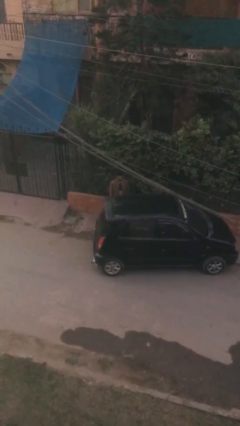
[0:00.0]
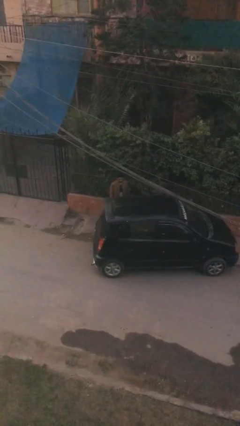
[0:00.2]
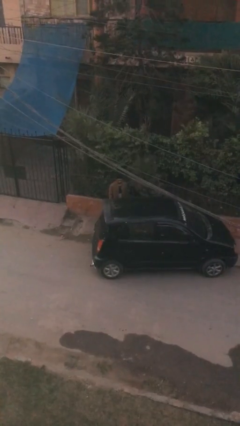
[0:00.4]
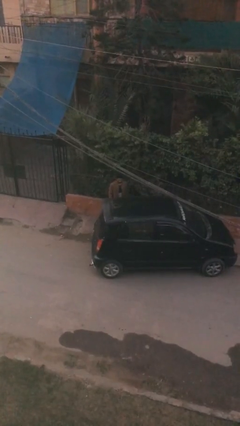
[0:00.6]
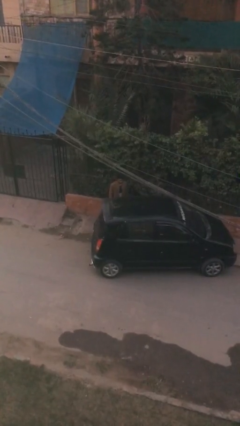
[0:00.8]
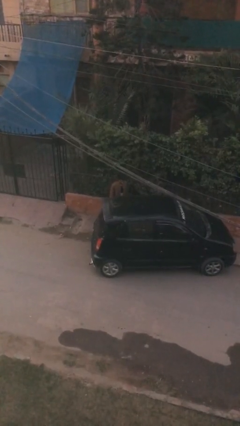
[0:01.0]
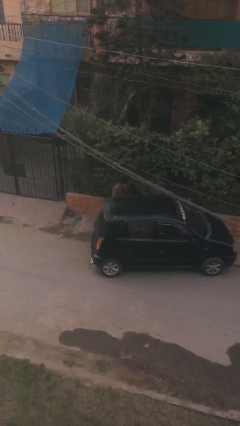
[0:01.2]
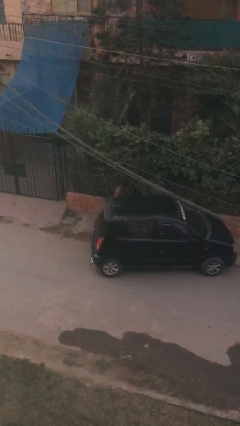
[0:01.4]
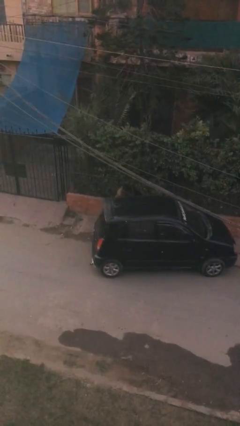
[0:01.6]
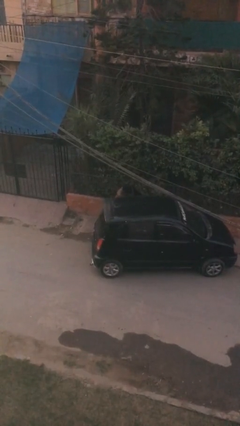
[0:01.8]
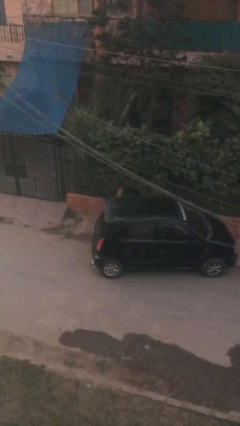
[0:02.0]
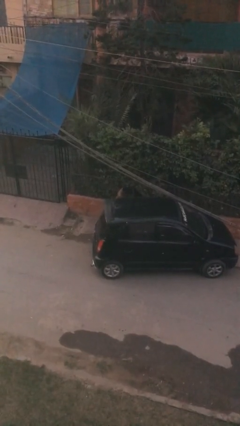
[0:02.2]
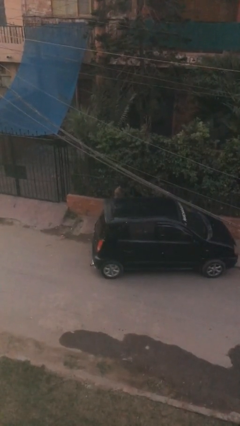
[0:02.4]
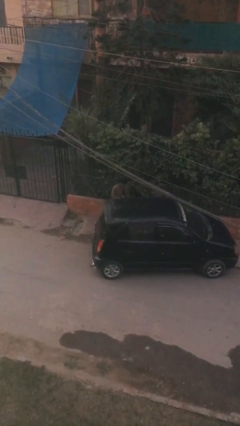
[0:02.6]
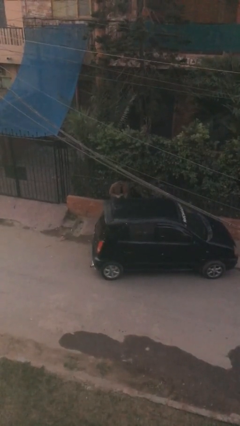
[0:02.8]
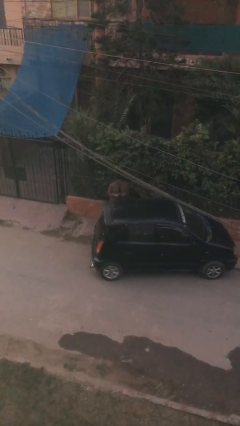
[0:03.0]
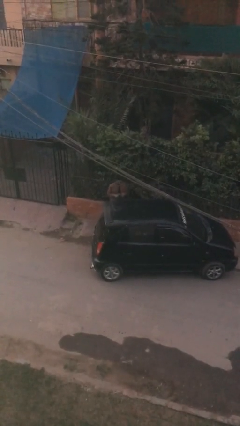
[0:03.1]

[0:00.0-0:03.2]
person unloads car

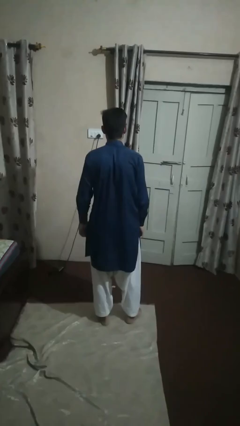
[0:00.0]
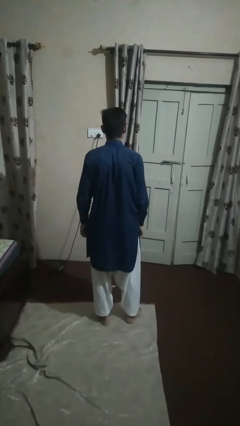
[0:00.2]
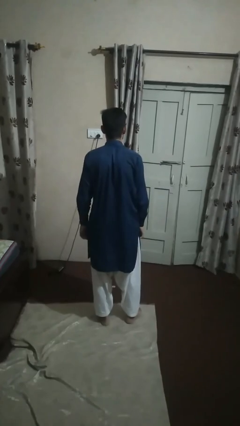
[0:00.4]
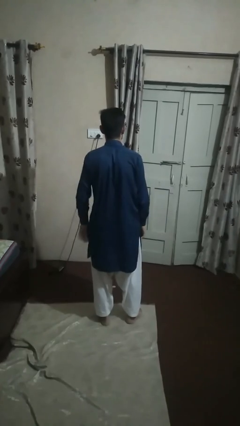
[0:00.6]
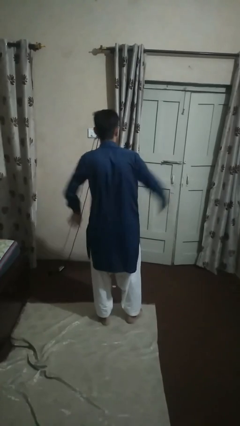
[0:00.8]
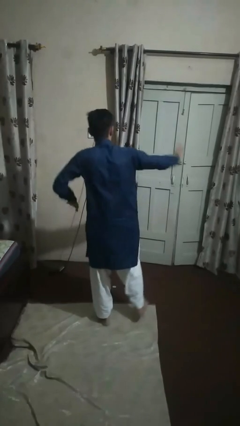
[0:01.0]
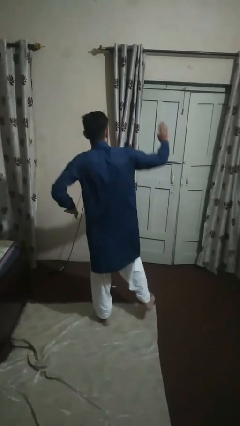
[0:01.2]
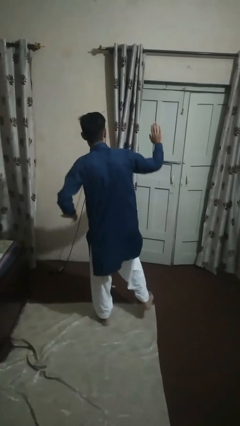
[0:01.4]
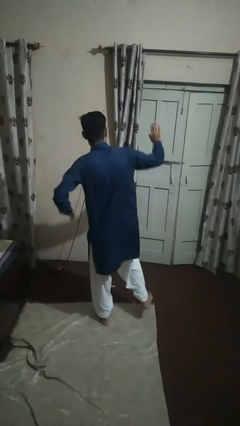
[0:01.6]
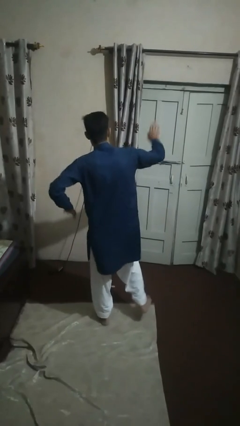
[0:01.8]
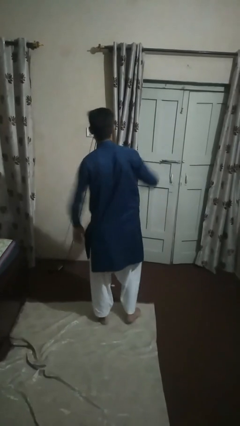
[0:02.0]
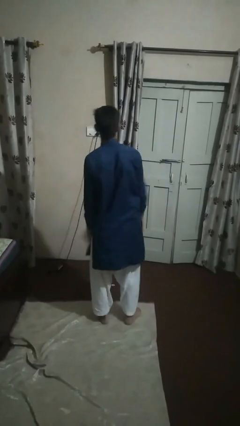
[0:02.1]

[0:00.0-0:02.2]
person dances in place

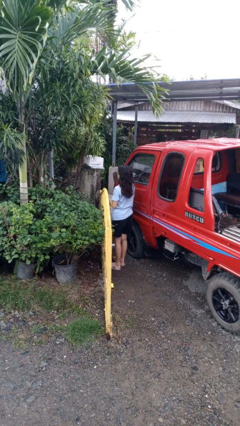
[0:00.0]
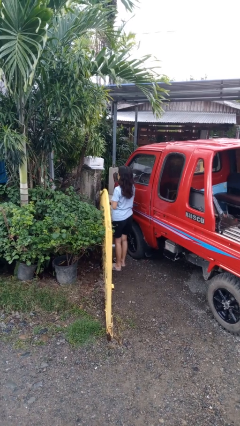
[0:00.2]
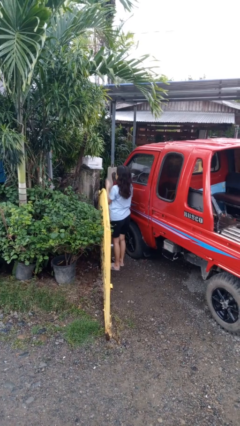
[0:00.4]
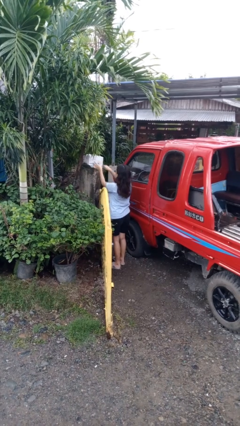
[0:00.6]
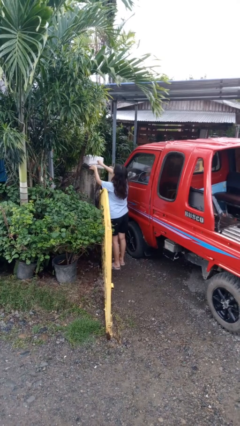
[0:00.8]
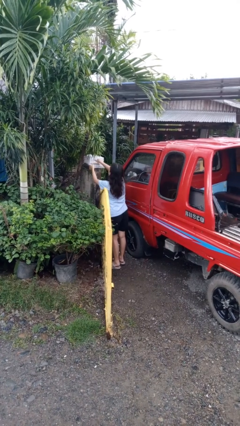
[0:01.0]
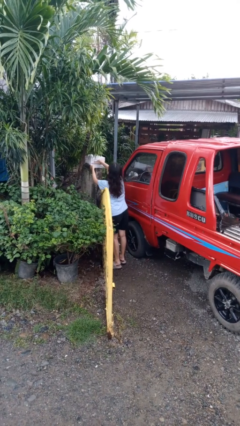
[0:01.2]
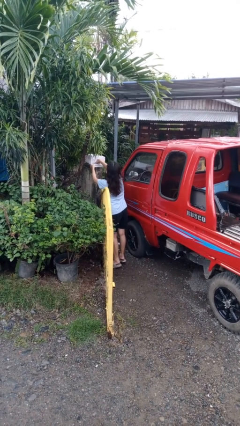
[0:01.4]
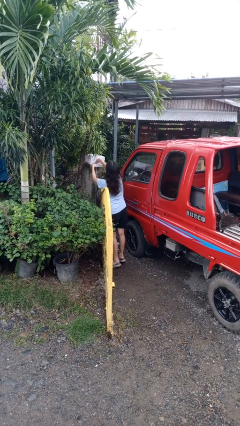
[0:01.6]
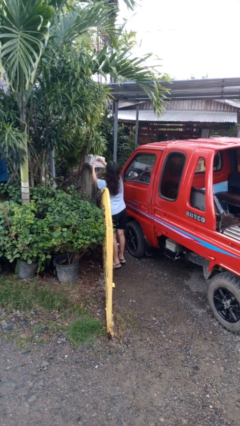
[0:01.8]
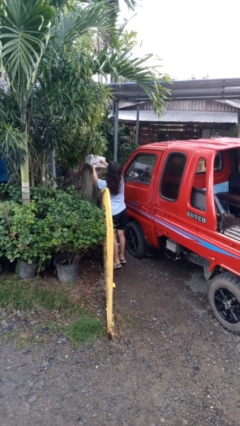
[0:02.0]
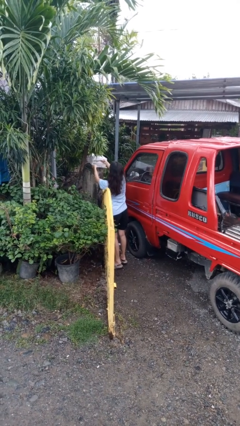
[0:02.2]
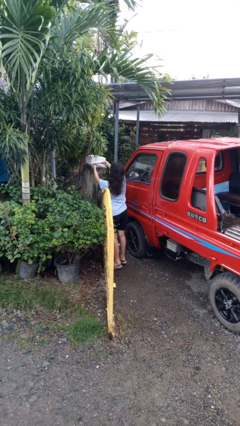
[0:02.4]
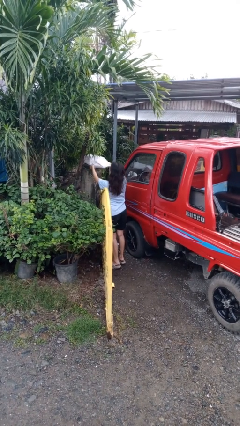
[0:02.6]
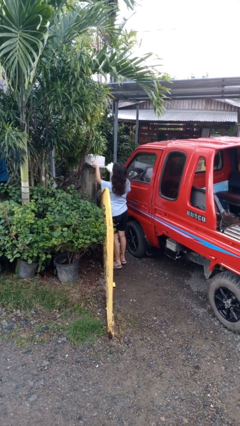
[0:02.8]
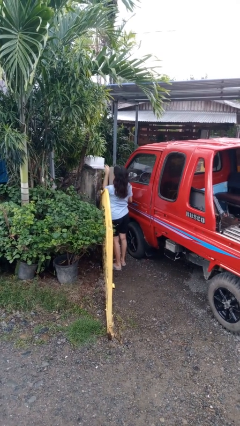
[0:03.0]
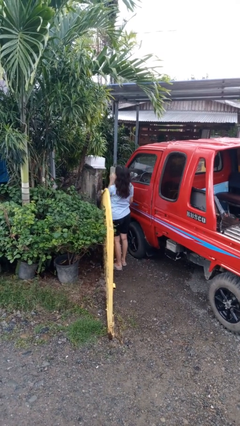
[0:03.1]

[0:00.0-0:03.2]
person takes letters from mailbox

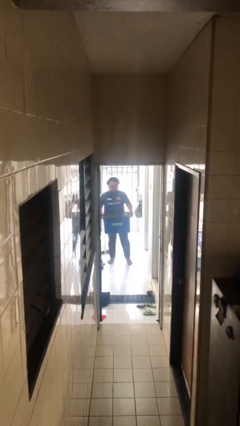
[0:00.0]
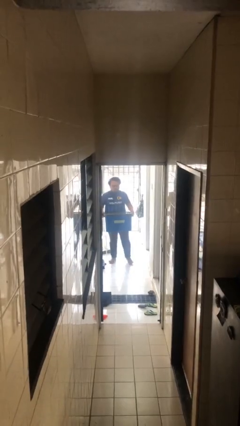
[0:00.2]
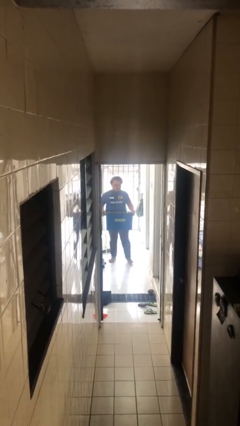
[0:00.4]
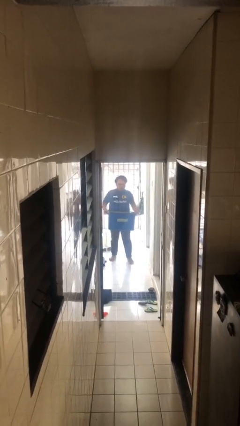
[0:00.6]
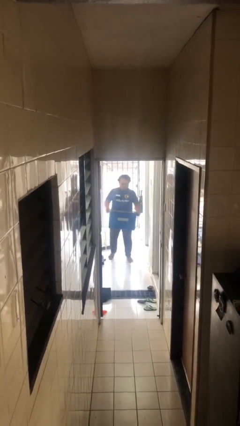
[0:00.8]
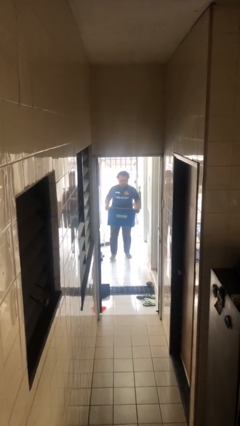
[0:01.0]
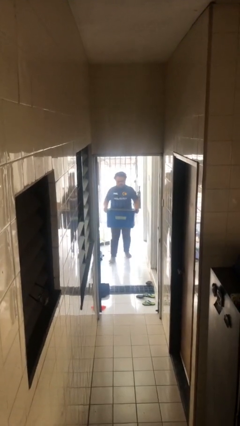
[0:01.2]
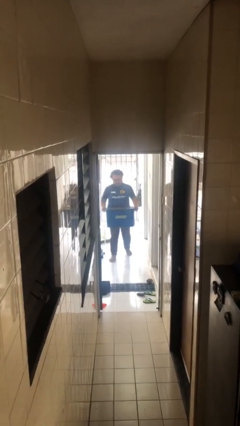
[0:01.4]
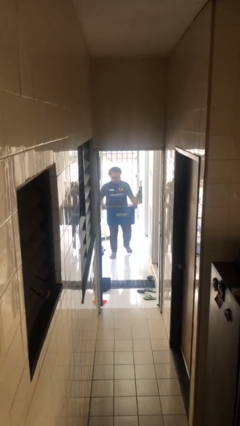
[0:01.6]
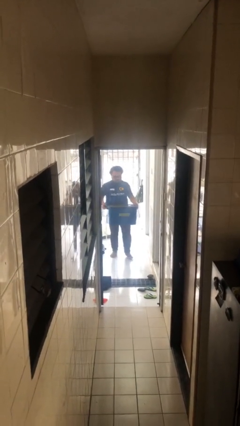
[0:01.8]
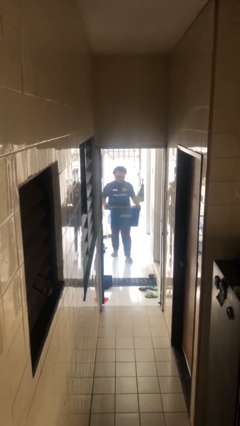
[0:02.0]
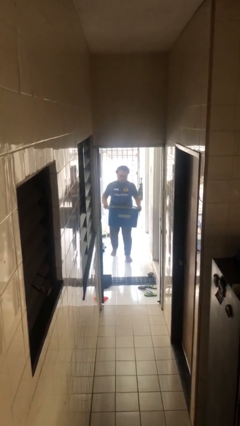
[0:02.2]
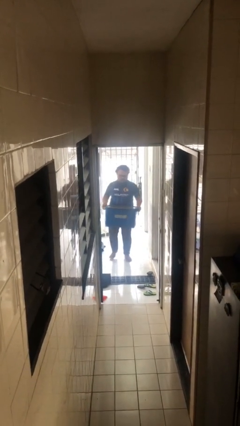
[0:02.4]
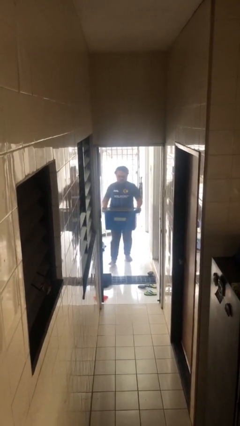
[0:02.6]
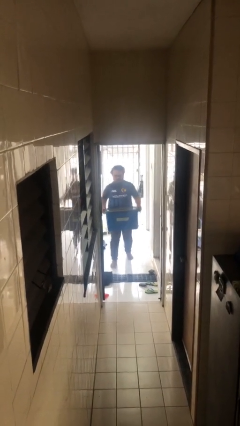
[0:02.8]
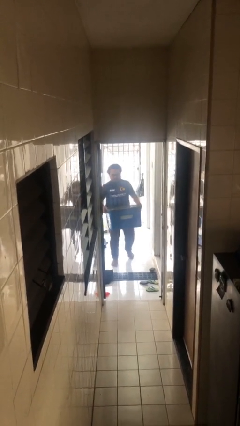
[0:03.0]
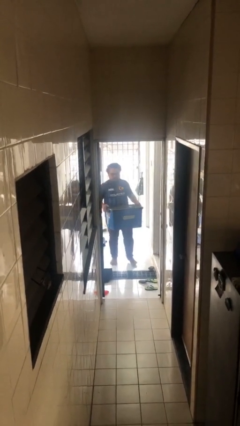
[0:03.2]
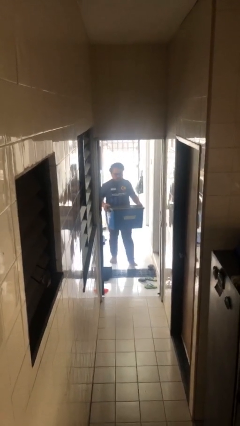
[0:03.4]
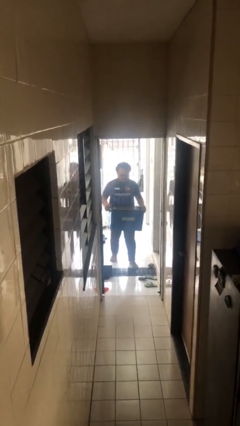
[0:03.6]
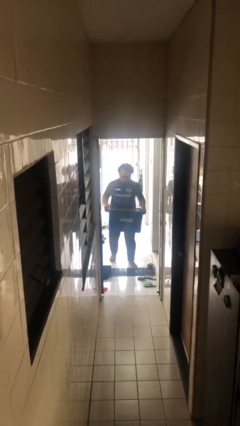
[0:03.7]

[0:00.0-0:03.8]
person carries heavy object

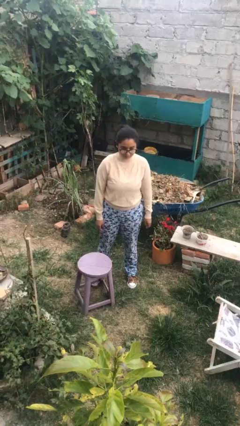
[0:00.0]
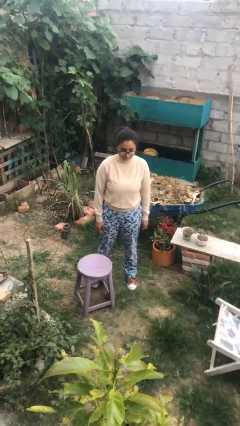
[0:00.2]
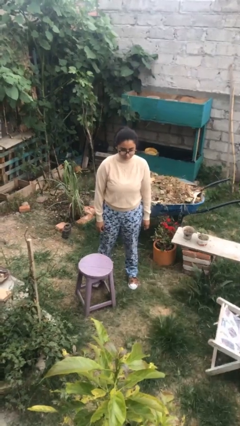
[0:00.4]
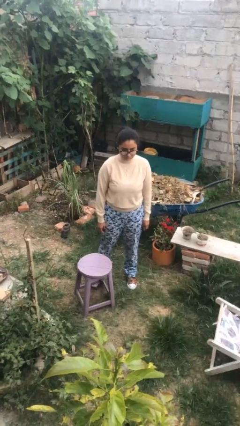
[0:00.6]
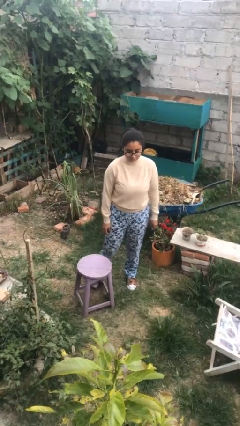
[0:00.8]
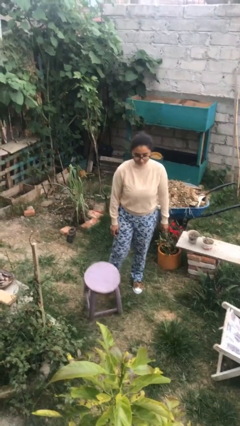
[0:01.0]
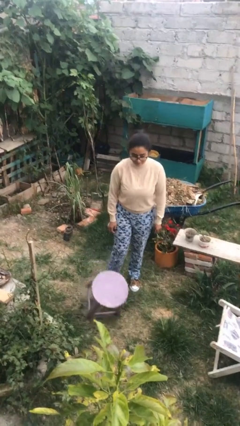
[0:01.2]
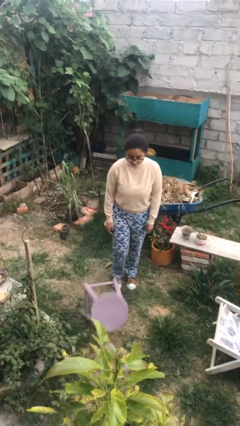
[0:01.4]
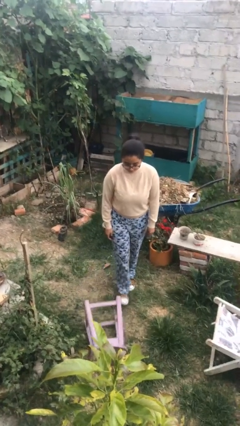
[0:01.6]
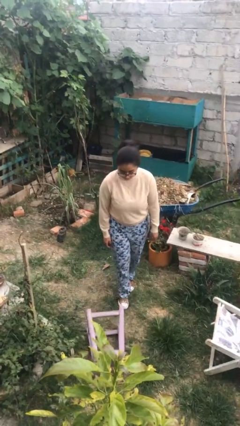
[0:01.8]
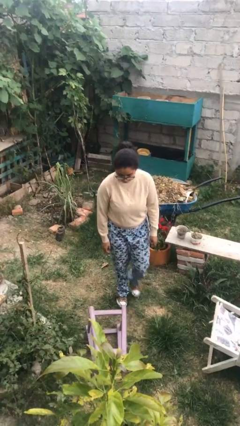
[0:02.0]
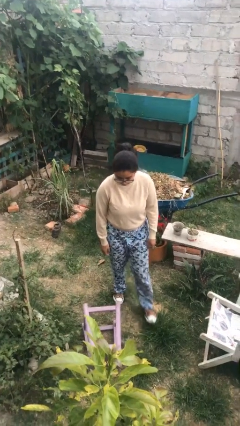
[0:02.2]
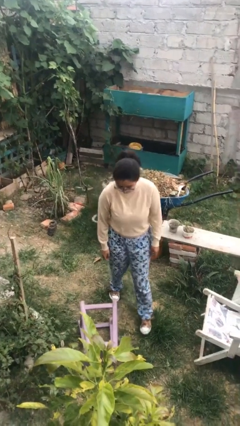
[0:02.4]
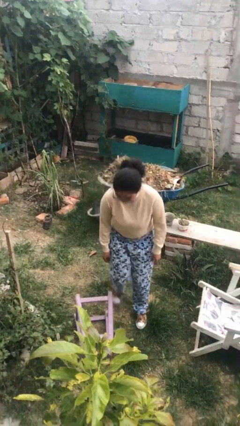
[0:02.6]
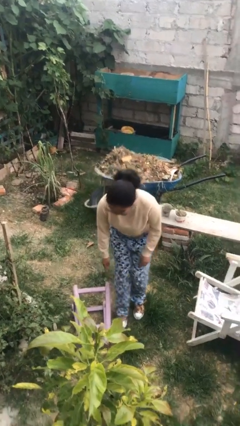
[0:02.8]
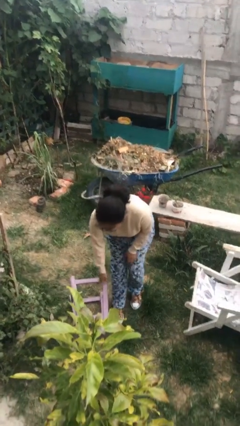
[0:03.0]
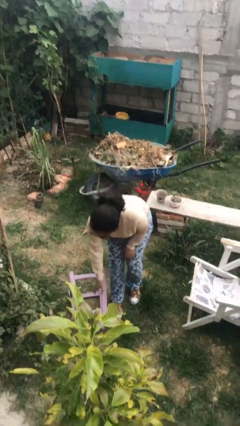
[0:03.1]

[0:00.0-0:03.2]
person knocks over furniture

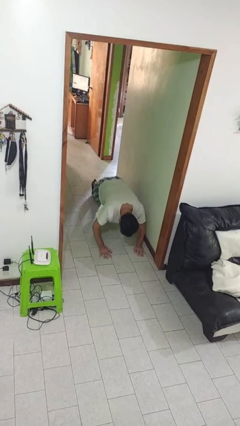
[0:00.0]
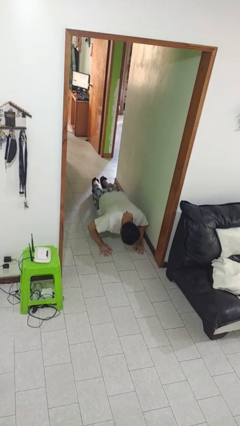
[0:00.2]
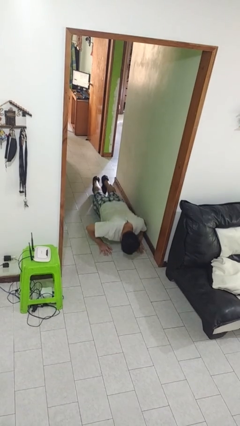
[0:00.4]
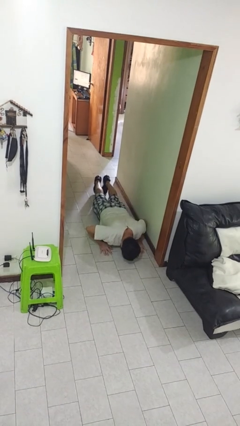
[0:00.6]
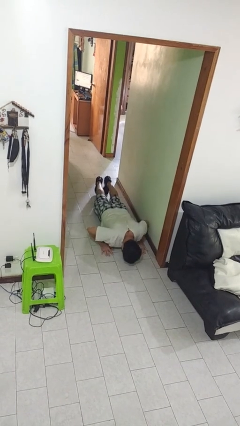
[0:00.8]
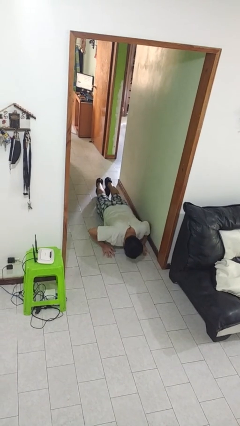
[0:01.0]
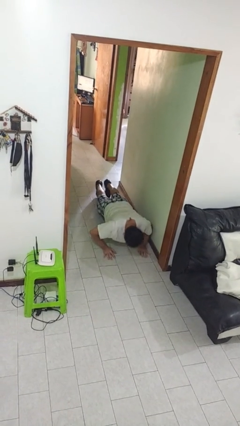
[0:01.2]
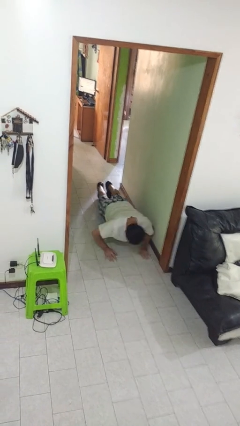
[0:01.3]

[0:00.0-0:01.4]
person exercises with pushup
